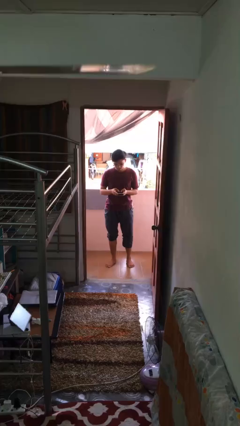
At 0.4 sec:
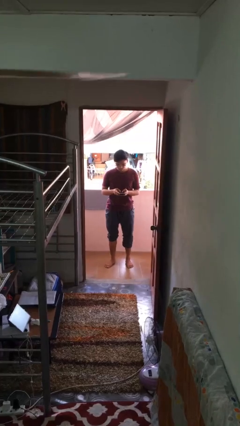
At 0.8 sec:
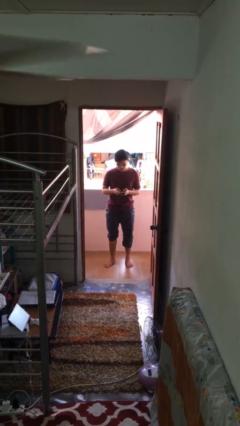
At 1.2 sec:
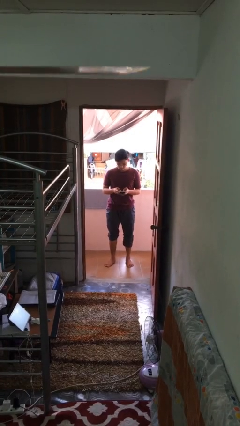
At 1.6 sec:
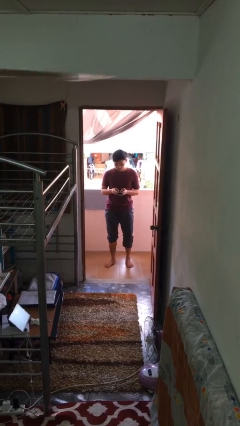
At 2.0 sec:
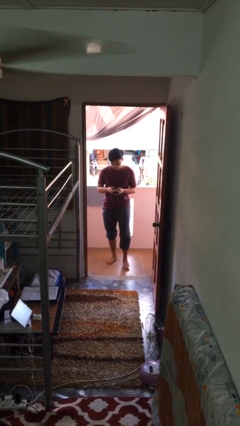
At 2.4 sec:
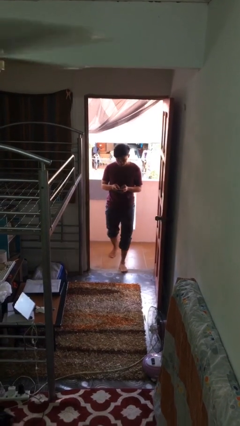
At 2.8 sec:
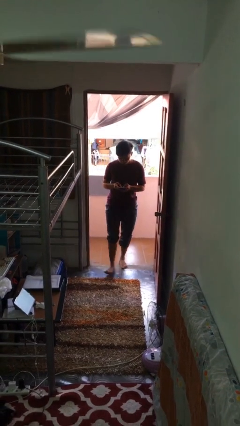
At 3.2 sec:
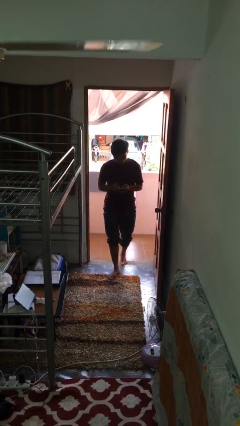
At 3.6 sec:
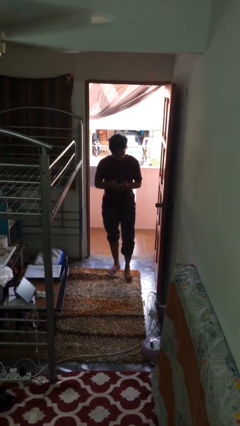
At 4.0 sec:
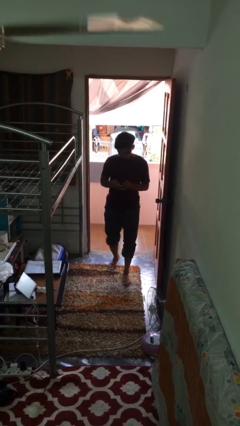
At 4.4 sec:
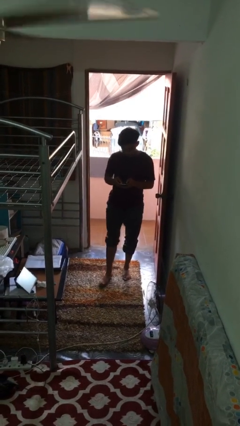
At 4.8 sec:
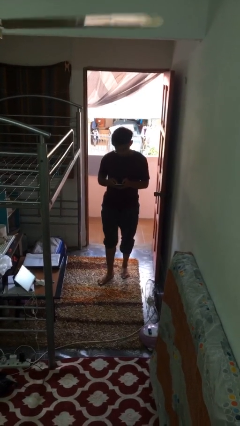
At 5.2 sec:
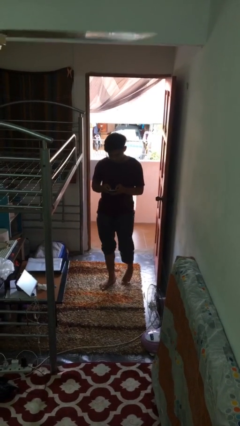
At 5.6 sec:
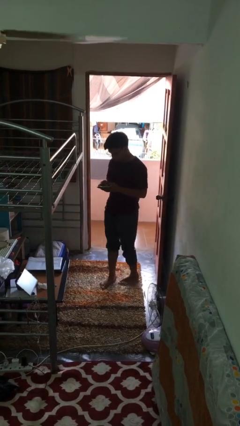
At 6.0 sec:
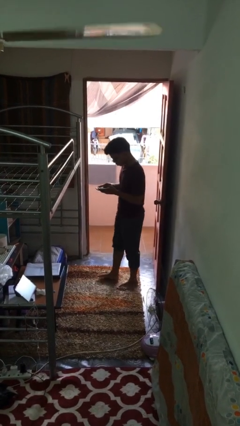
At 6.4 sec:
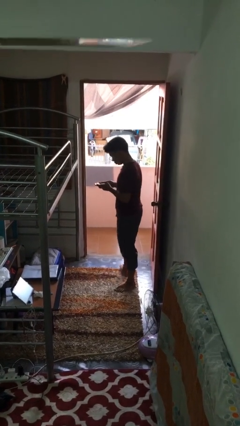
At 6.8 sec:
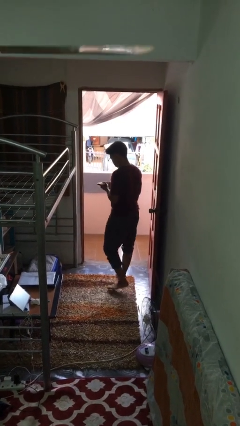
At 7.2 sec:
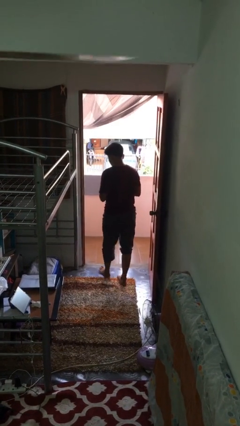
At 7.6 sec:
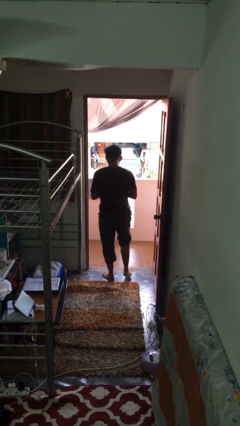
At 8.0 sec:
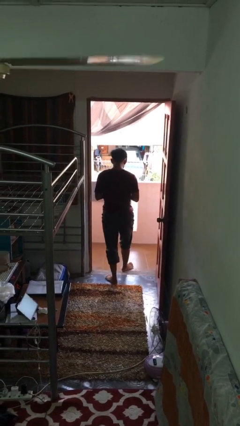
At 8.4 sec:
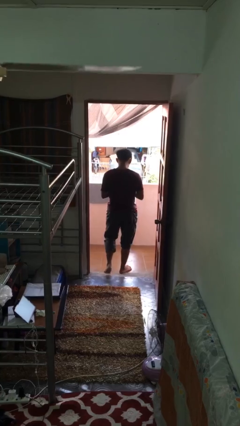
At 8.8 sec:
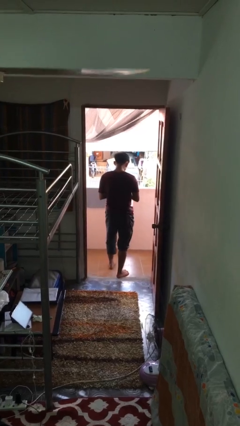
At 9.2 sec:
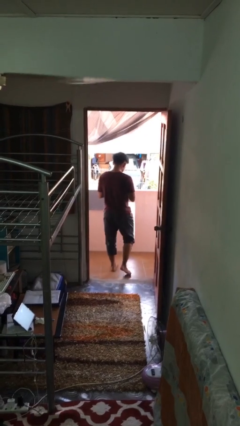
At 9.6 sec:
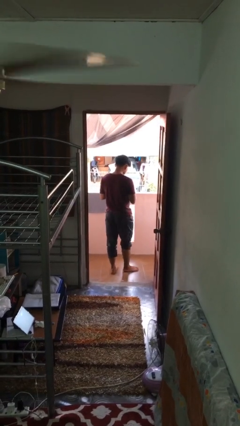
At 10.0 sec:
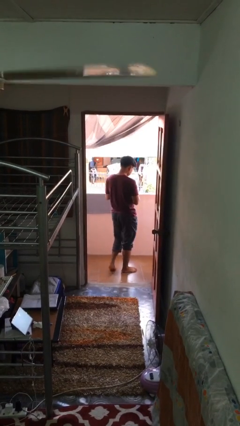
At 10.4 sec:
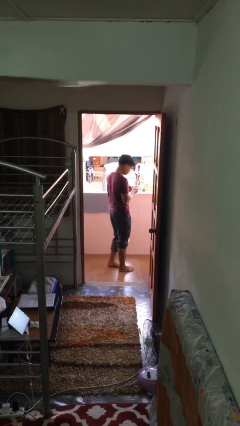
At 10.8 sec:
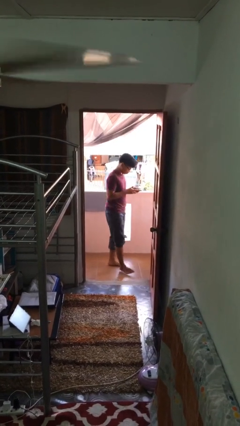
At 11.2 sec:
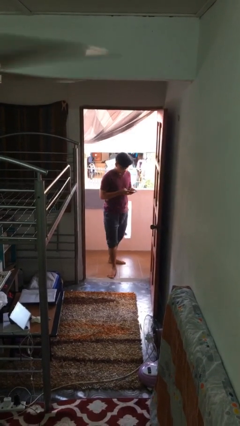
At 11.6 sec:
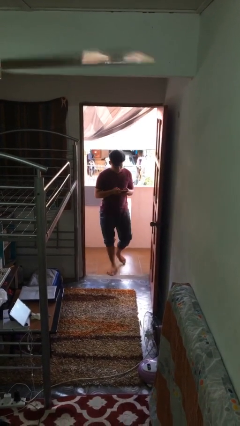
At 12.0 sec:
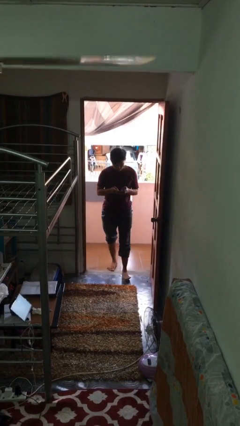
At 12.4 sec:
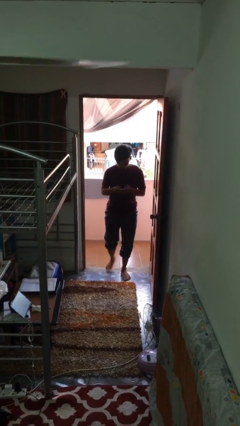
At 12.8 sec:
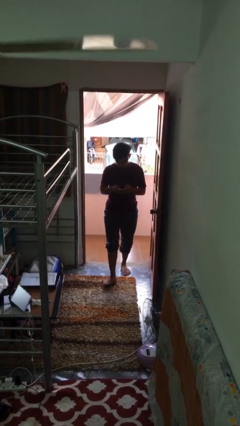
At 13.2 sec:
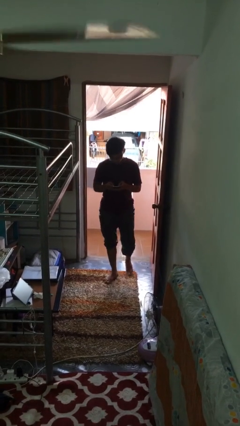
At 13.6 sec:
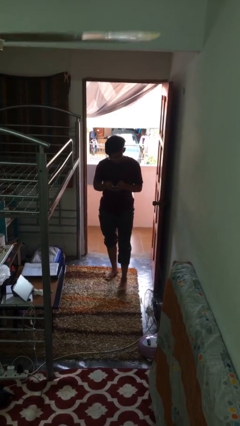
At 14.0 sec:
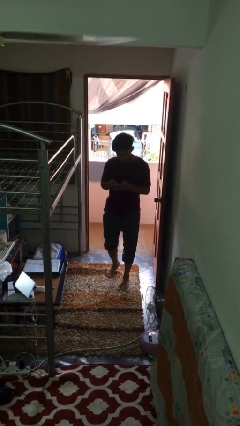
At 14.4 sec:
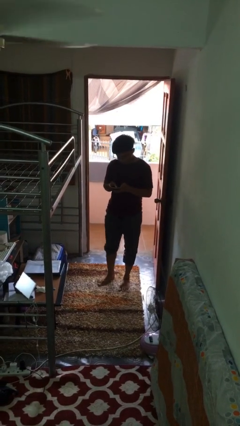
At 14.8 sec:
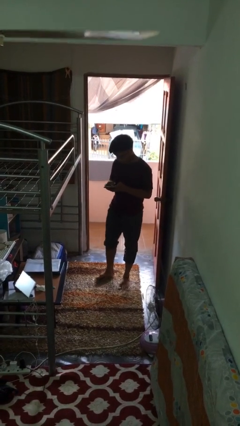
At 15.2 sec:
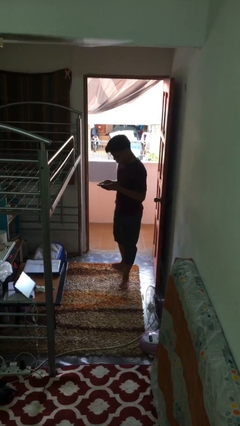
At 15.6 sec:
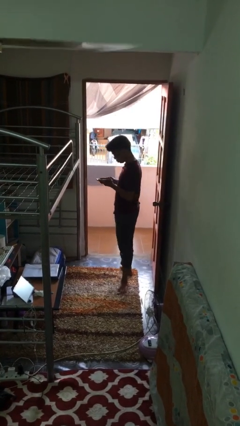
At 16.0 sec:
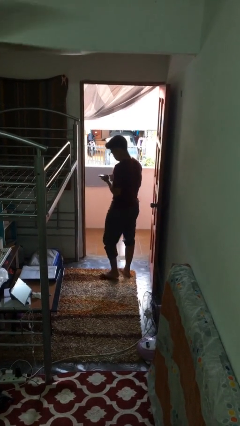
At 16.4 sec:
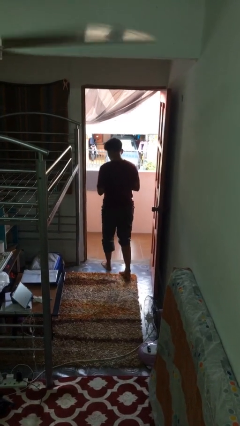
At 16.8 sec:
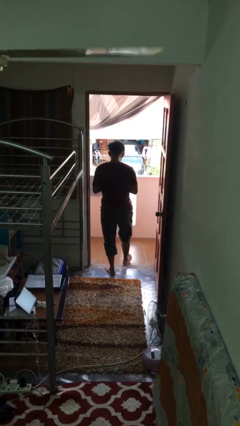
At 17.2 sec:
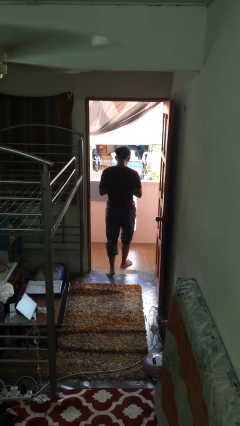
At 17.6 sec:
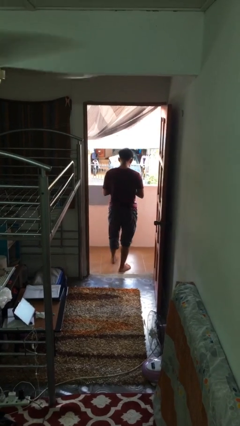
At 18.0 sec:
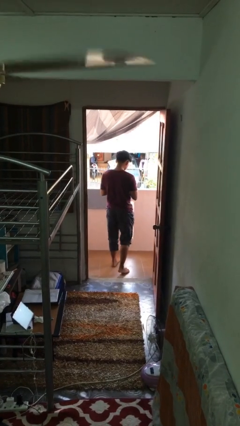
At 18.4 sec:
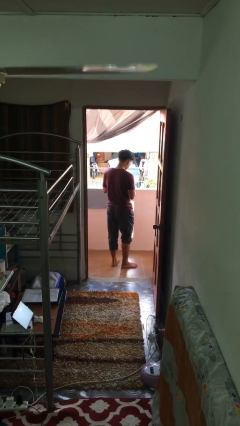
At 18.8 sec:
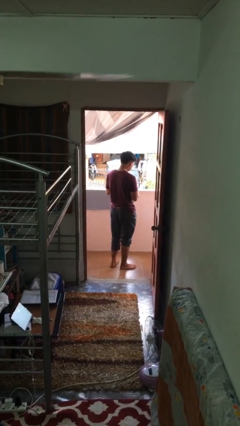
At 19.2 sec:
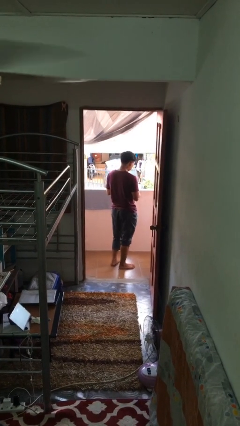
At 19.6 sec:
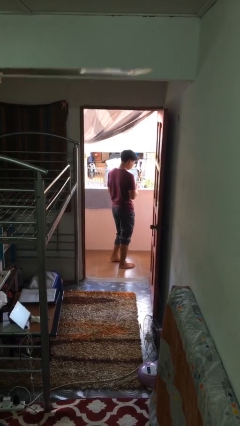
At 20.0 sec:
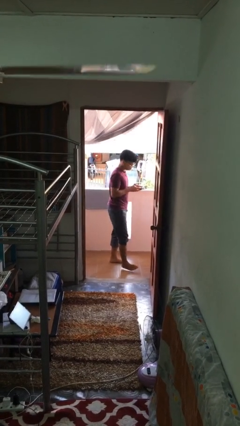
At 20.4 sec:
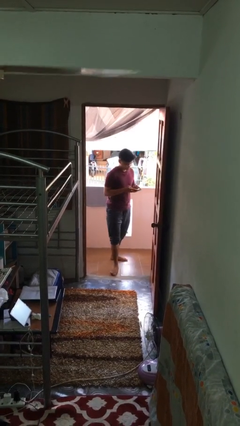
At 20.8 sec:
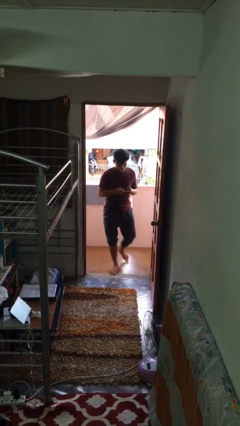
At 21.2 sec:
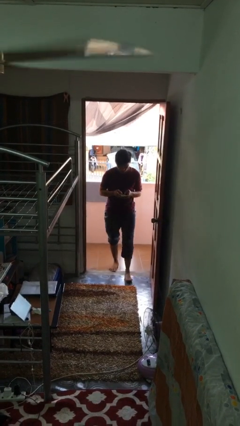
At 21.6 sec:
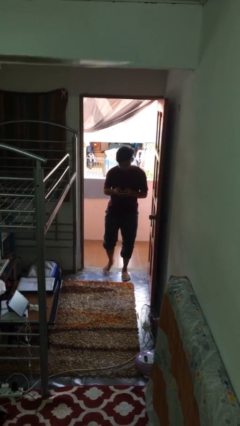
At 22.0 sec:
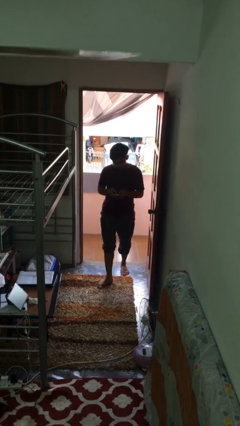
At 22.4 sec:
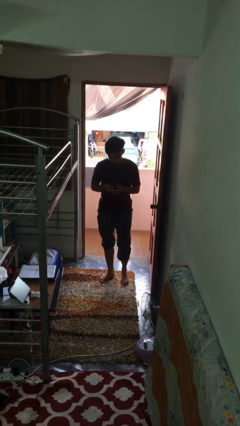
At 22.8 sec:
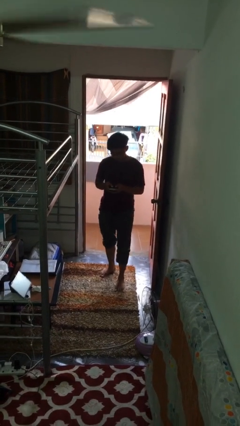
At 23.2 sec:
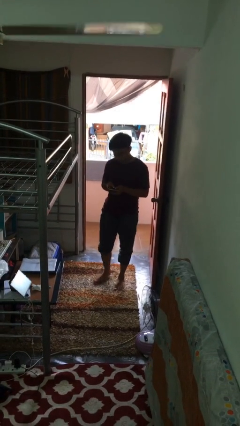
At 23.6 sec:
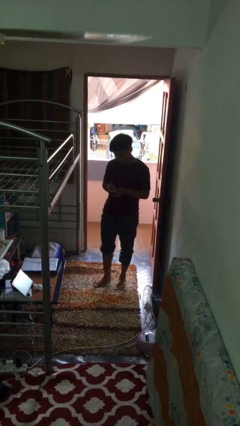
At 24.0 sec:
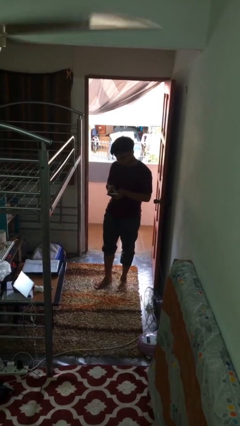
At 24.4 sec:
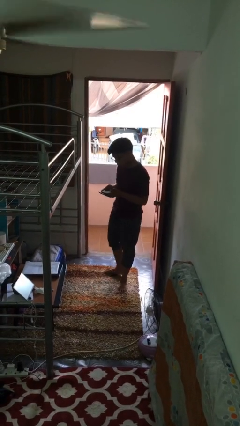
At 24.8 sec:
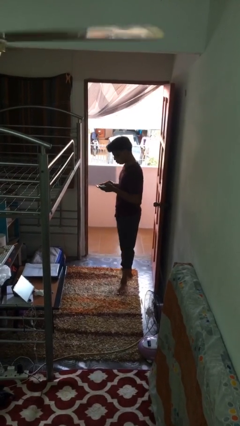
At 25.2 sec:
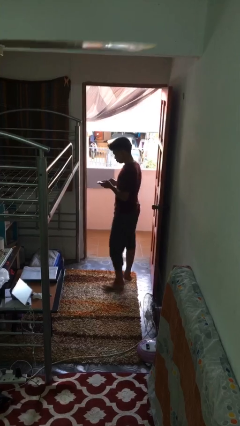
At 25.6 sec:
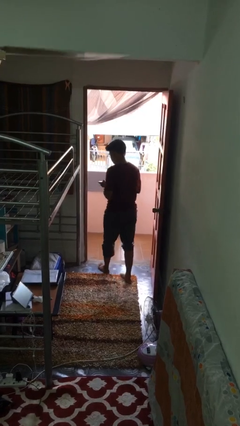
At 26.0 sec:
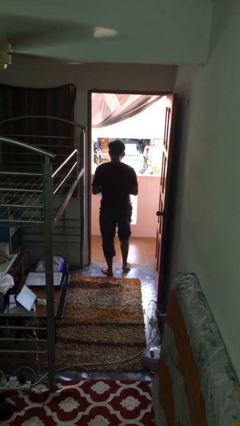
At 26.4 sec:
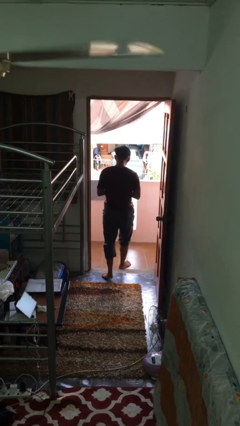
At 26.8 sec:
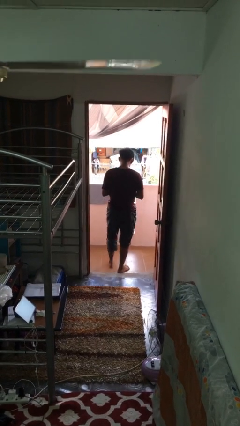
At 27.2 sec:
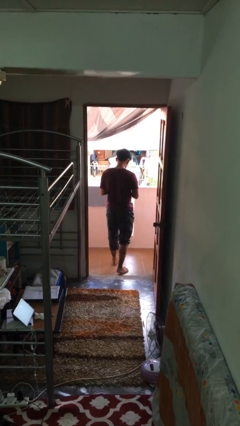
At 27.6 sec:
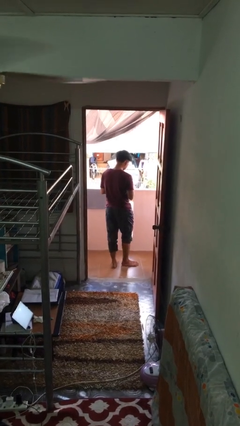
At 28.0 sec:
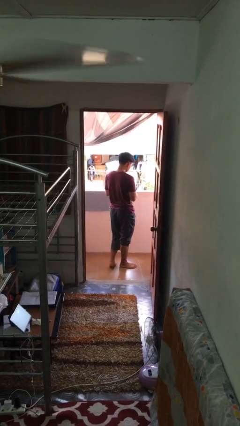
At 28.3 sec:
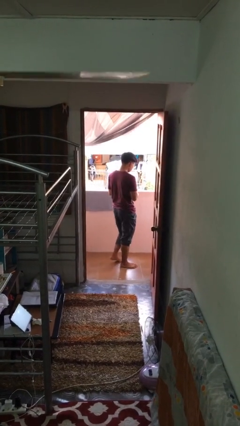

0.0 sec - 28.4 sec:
person texts on phone

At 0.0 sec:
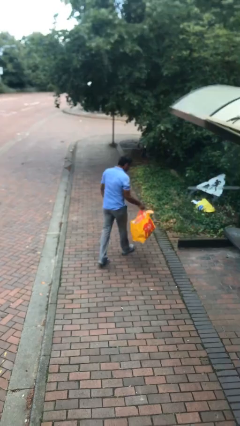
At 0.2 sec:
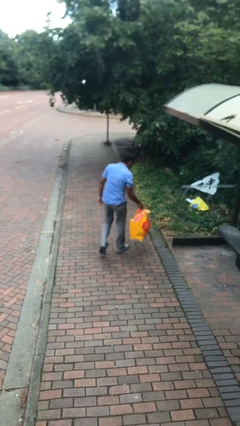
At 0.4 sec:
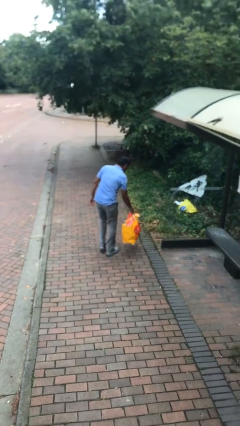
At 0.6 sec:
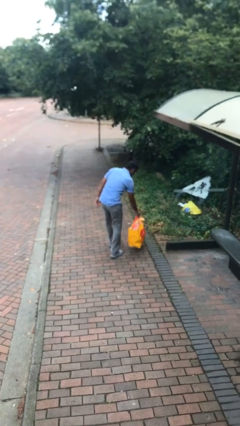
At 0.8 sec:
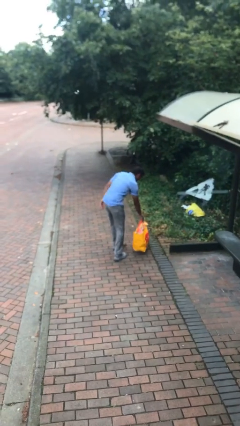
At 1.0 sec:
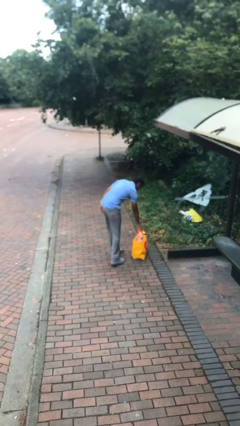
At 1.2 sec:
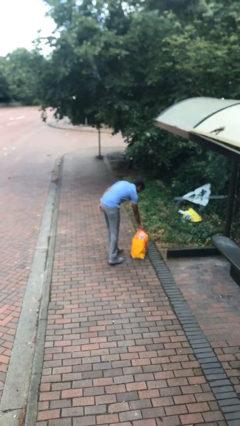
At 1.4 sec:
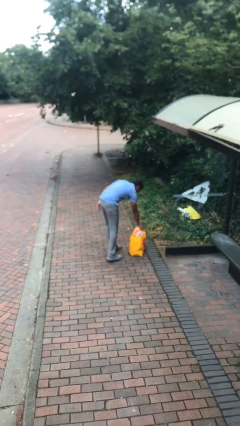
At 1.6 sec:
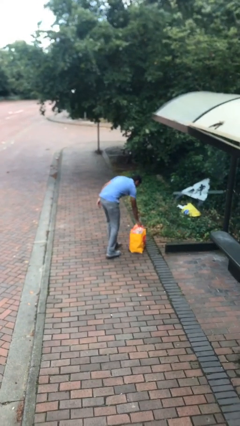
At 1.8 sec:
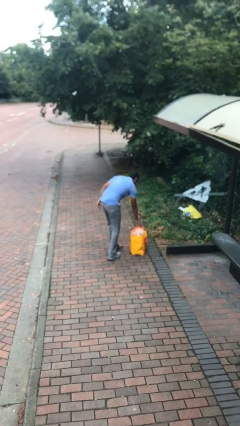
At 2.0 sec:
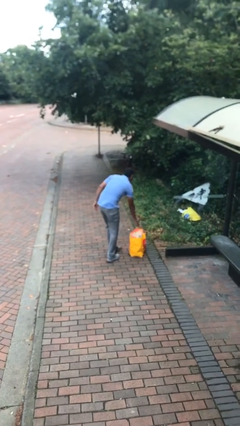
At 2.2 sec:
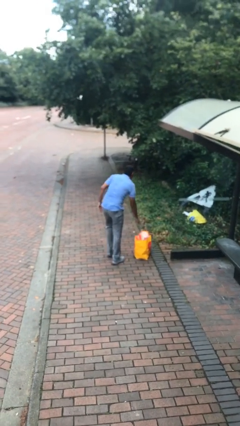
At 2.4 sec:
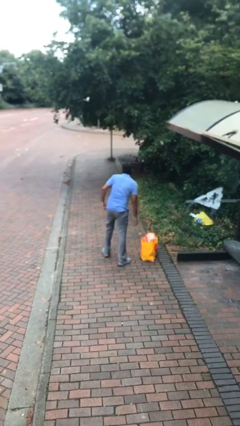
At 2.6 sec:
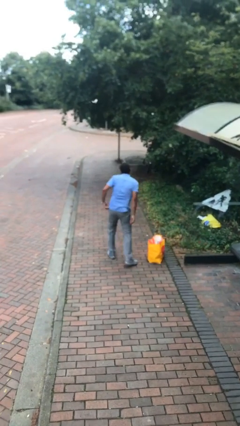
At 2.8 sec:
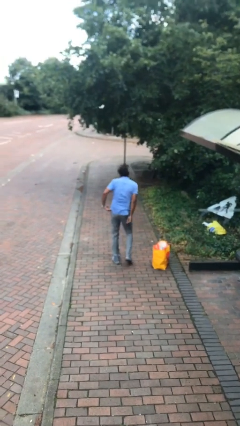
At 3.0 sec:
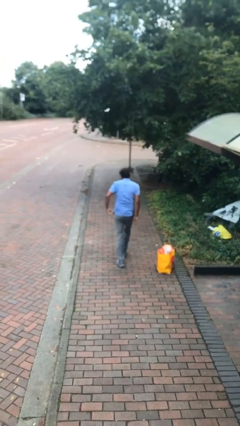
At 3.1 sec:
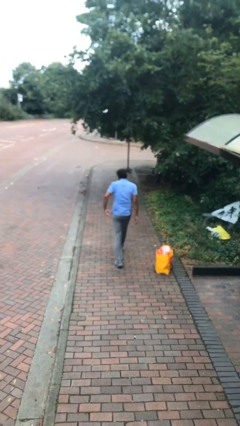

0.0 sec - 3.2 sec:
person puts down object on floor

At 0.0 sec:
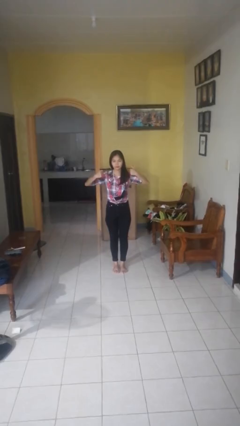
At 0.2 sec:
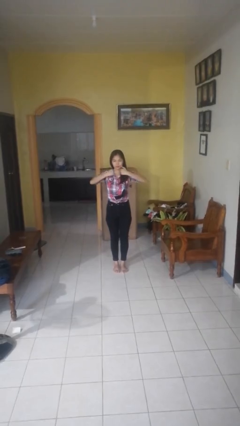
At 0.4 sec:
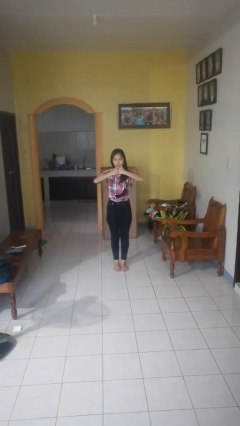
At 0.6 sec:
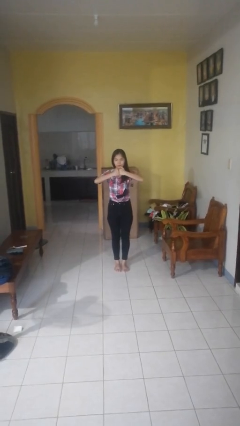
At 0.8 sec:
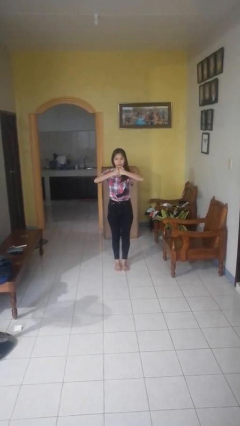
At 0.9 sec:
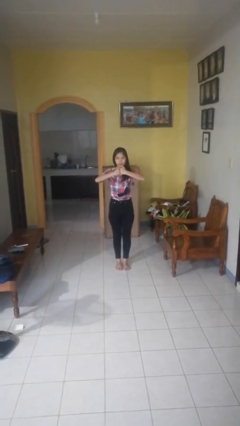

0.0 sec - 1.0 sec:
person gestures zoom out
